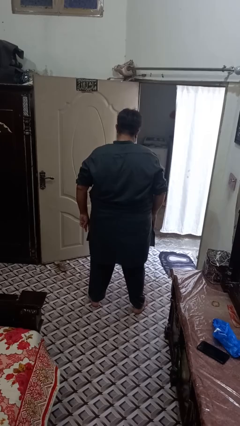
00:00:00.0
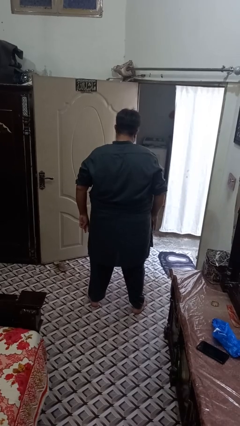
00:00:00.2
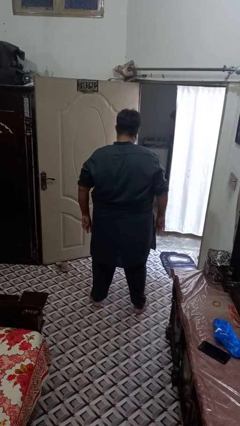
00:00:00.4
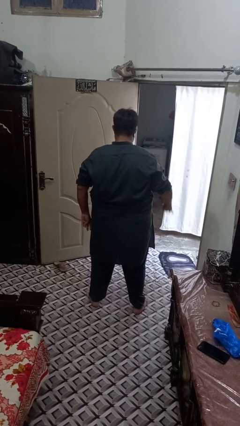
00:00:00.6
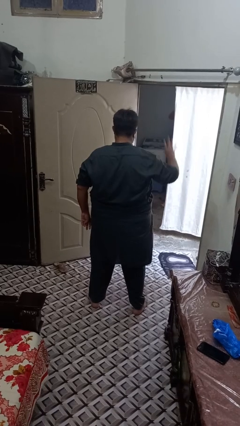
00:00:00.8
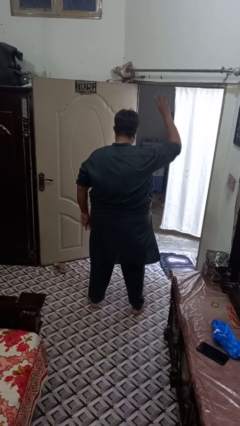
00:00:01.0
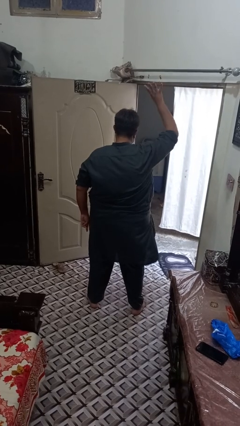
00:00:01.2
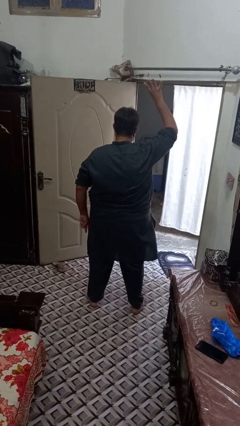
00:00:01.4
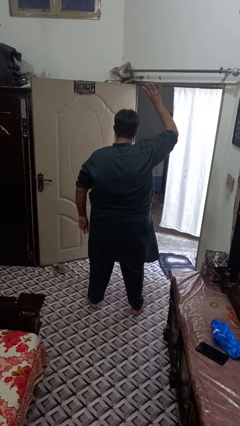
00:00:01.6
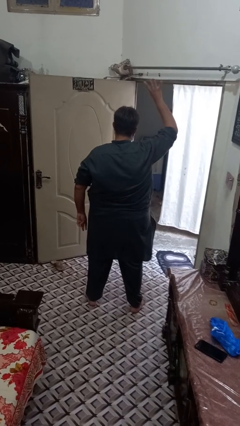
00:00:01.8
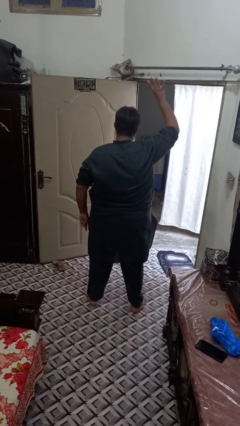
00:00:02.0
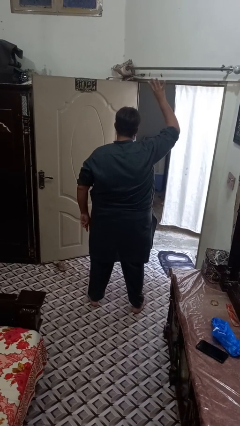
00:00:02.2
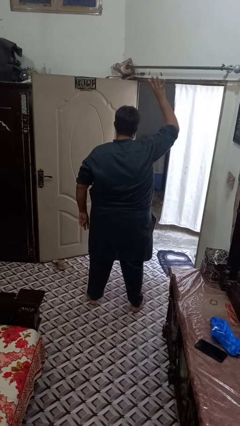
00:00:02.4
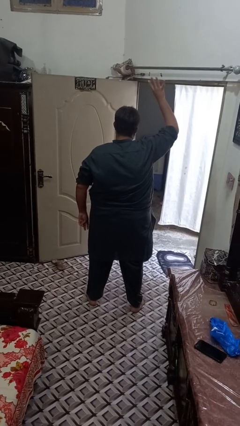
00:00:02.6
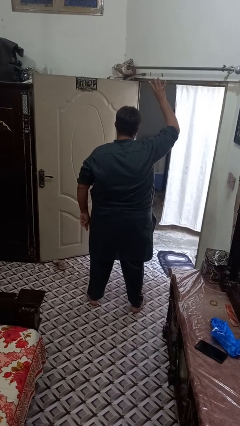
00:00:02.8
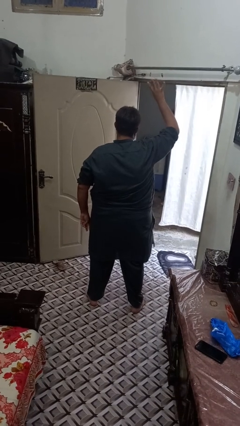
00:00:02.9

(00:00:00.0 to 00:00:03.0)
person gestures number four

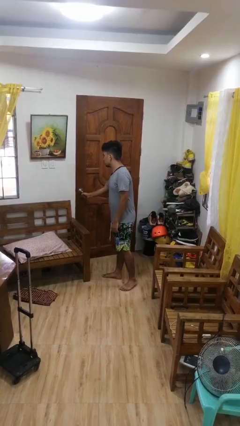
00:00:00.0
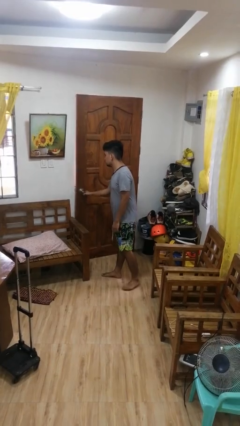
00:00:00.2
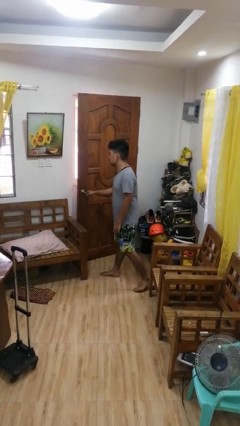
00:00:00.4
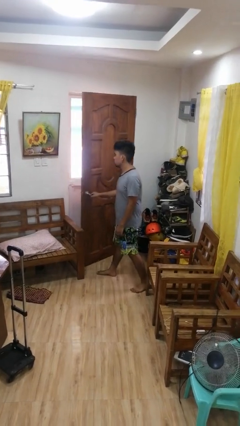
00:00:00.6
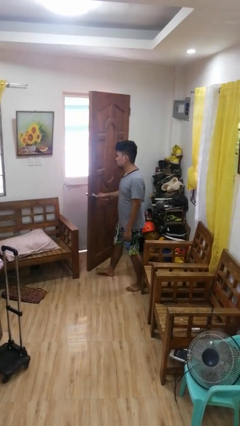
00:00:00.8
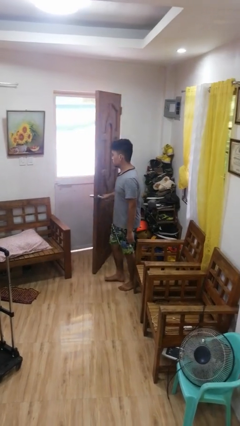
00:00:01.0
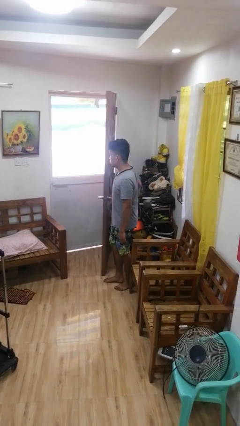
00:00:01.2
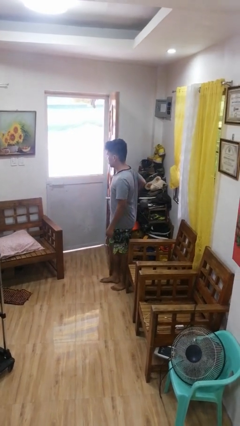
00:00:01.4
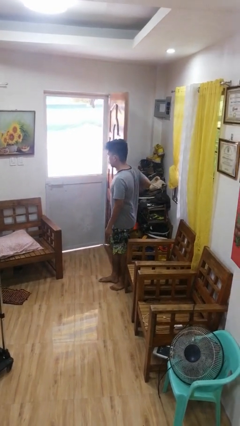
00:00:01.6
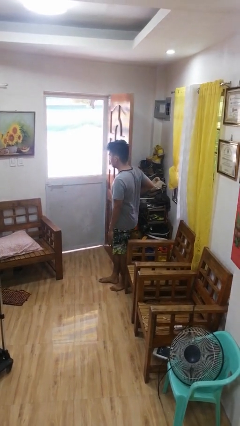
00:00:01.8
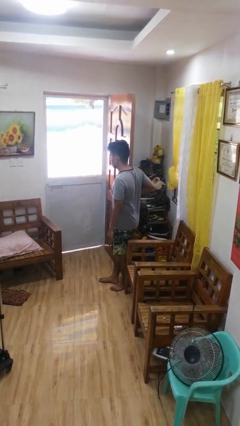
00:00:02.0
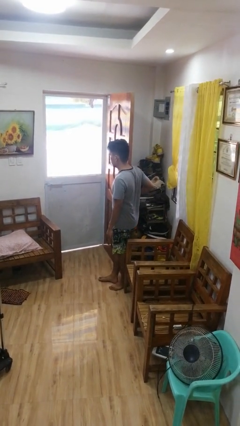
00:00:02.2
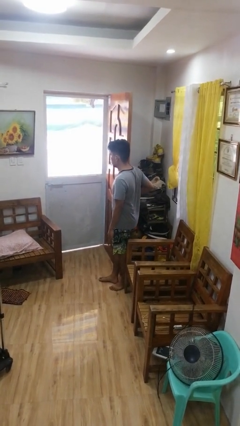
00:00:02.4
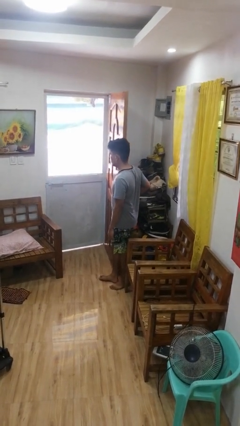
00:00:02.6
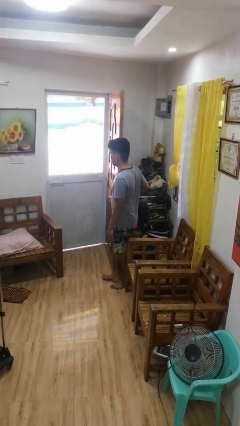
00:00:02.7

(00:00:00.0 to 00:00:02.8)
person opens facility door

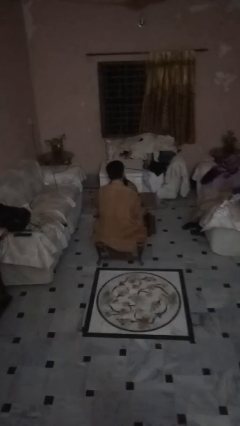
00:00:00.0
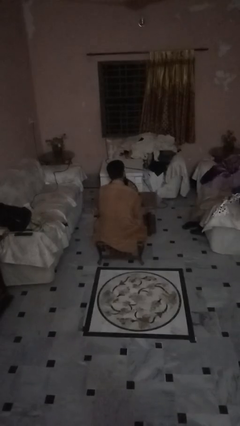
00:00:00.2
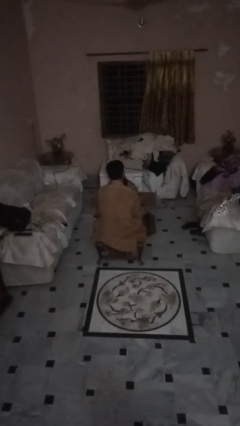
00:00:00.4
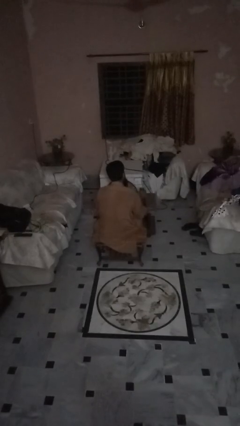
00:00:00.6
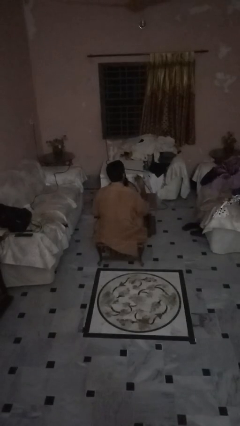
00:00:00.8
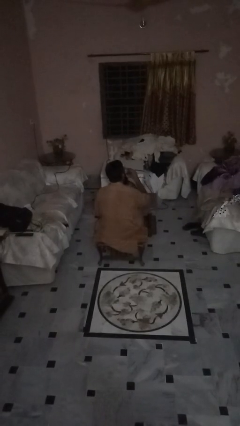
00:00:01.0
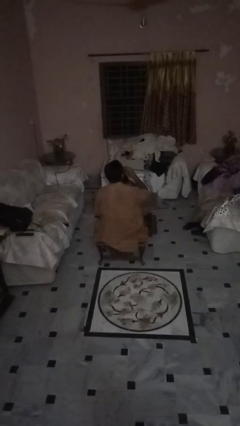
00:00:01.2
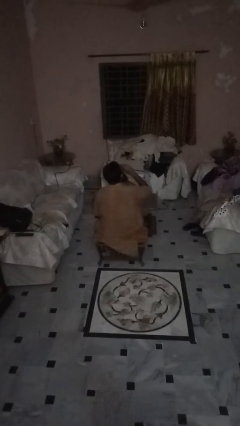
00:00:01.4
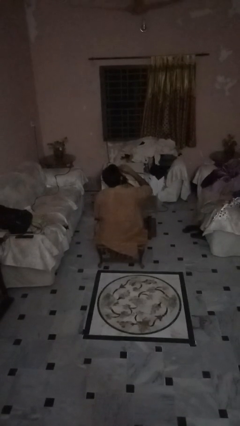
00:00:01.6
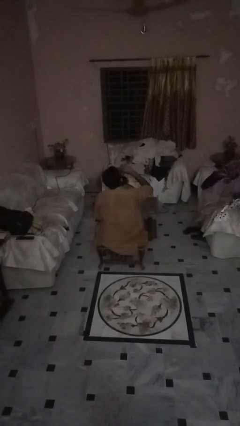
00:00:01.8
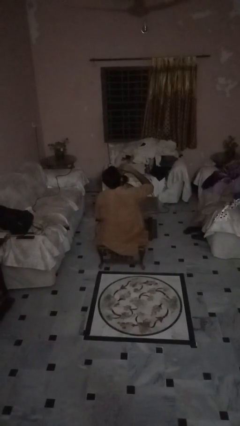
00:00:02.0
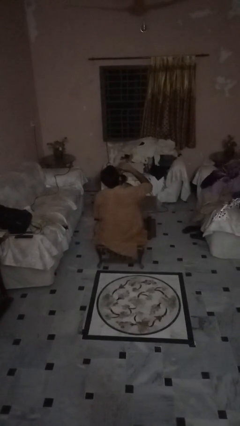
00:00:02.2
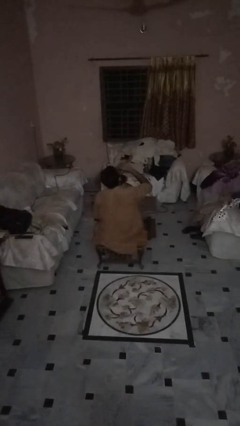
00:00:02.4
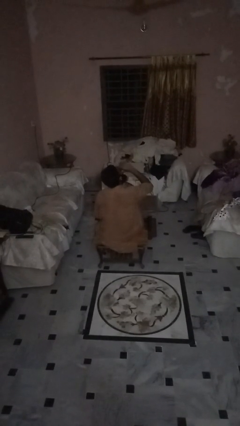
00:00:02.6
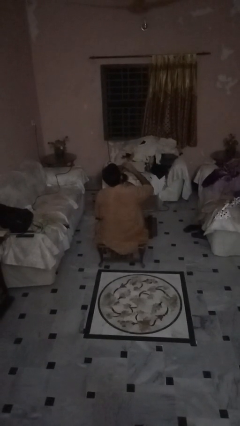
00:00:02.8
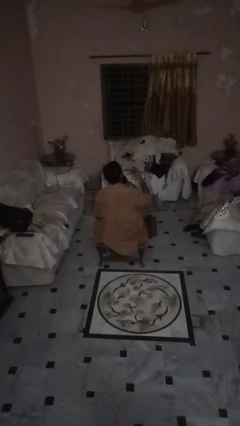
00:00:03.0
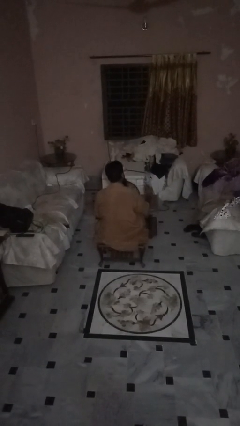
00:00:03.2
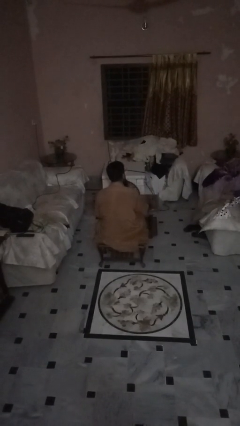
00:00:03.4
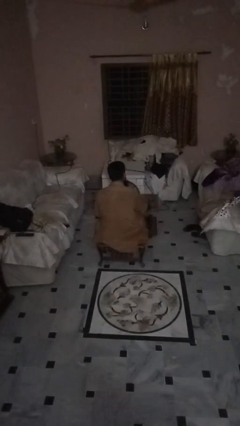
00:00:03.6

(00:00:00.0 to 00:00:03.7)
person drinks from beverage can

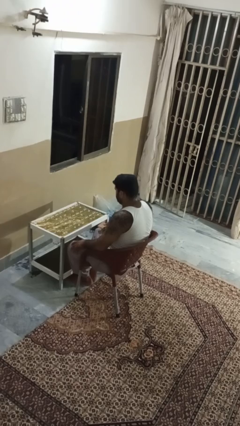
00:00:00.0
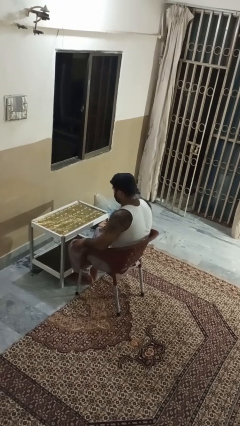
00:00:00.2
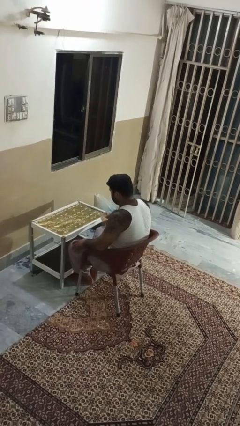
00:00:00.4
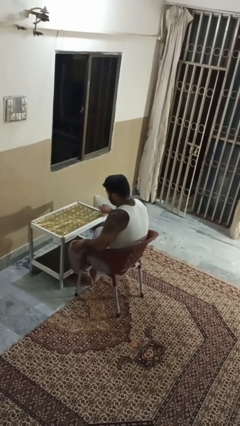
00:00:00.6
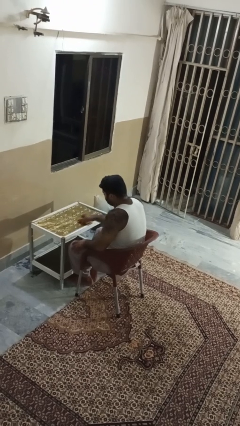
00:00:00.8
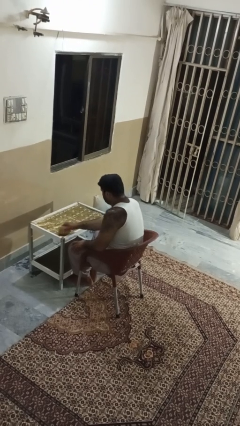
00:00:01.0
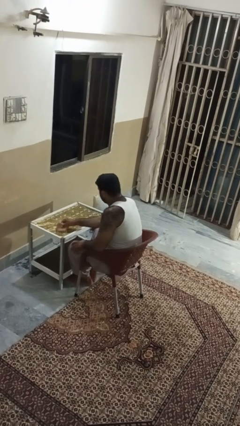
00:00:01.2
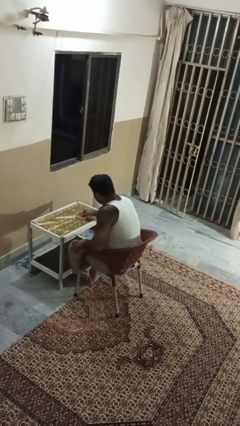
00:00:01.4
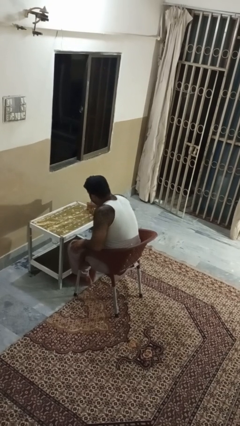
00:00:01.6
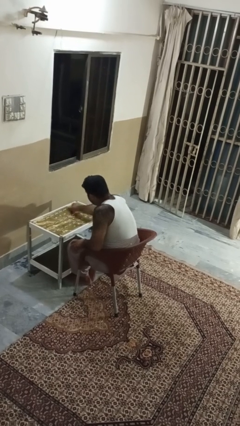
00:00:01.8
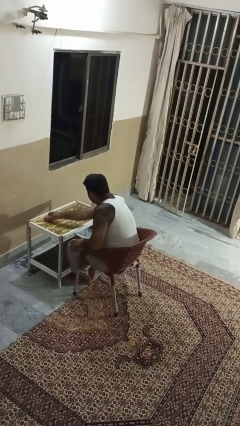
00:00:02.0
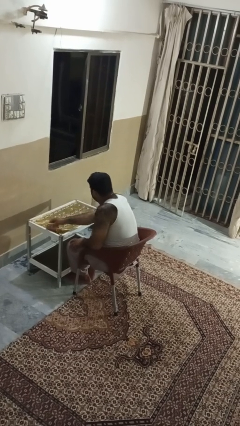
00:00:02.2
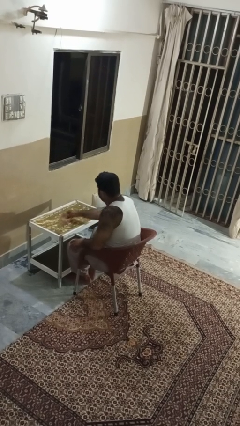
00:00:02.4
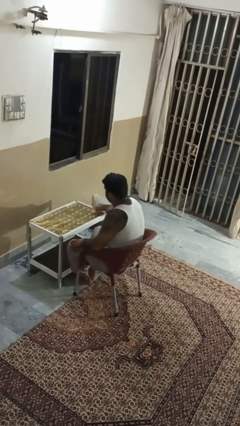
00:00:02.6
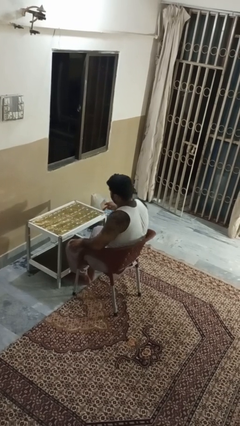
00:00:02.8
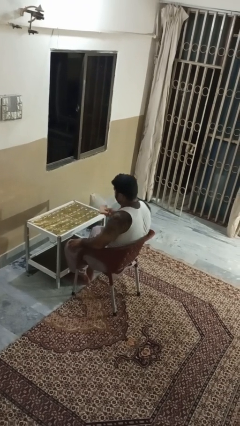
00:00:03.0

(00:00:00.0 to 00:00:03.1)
person cleans table with rag

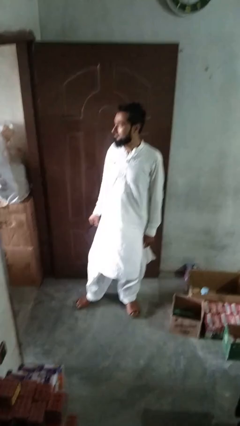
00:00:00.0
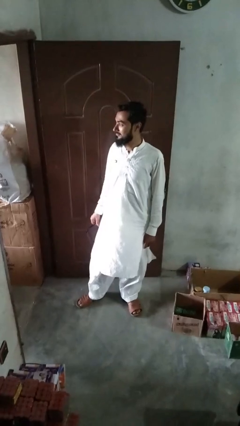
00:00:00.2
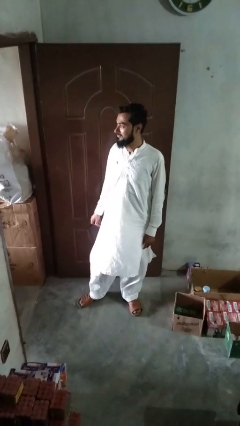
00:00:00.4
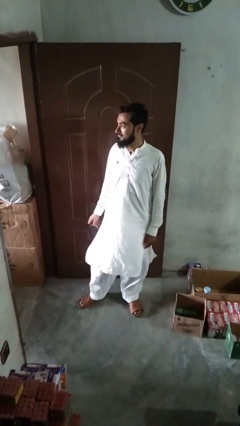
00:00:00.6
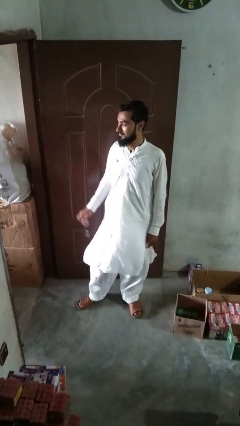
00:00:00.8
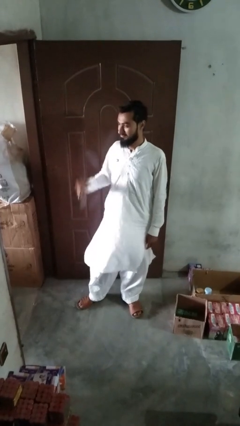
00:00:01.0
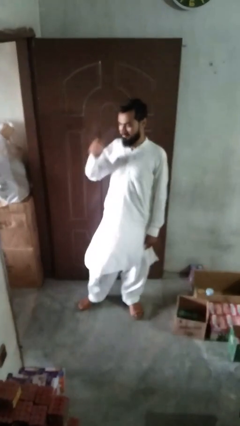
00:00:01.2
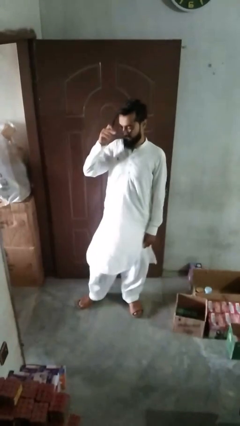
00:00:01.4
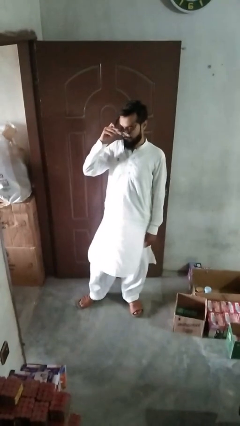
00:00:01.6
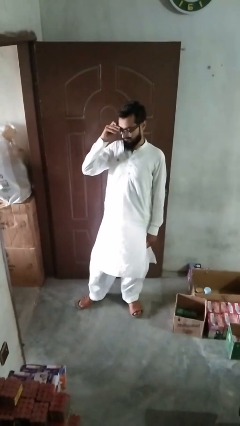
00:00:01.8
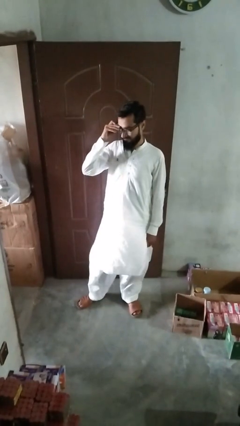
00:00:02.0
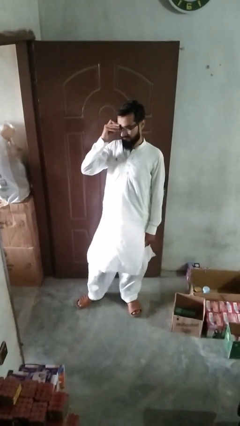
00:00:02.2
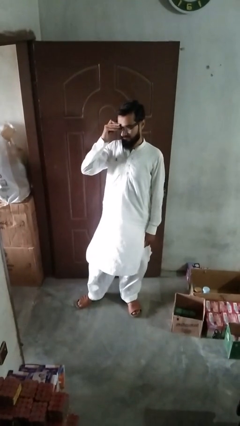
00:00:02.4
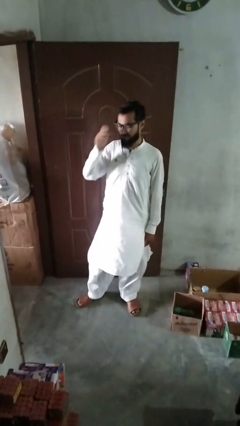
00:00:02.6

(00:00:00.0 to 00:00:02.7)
person puts on glasses

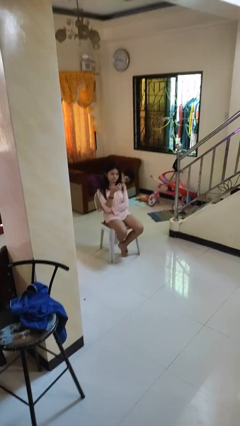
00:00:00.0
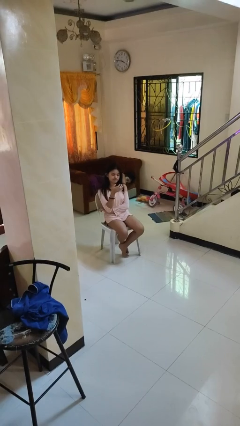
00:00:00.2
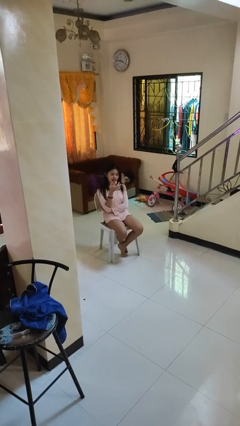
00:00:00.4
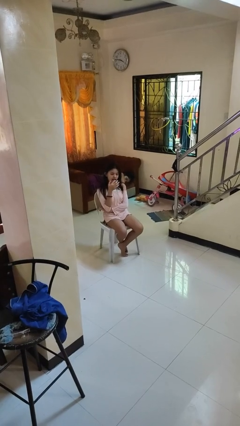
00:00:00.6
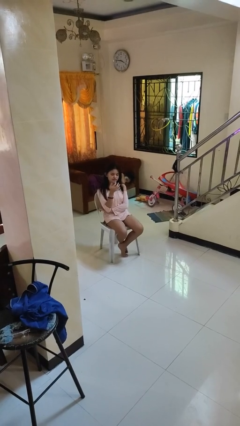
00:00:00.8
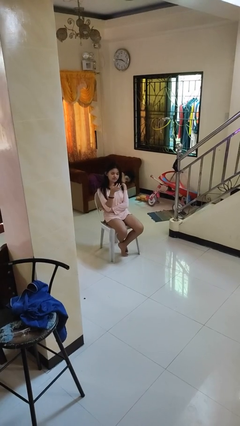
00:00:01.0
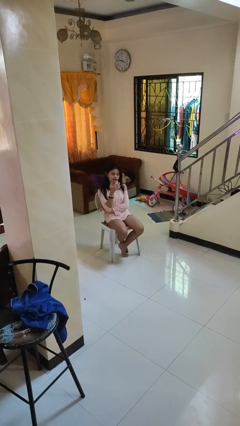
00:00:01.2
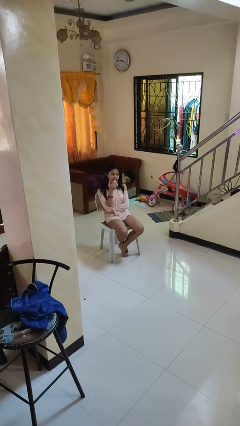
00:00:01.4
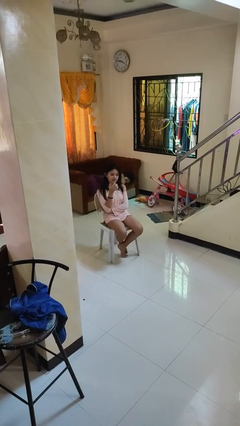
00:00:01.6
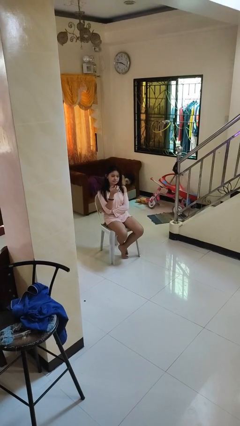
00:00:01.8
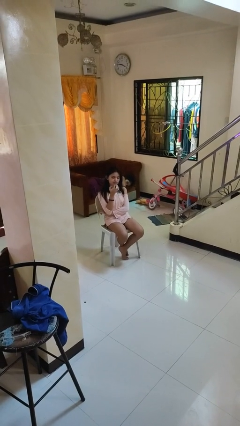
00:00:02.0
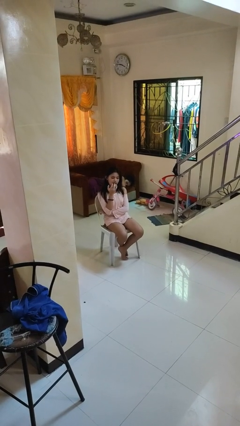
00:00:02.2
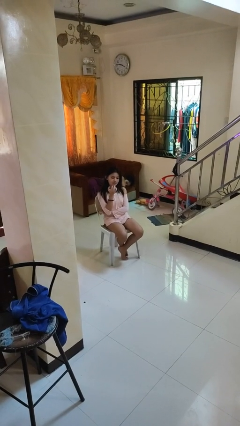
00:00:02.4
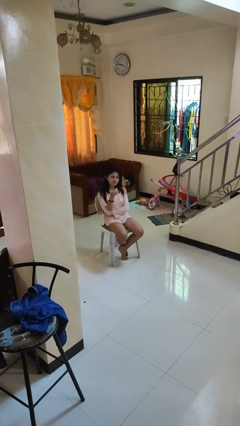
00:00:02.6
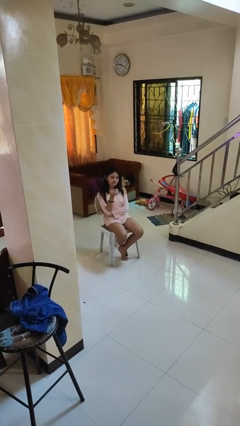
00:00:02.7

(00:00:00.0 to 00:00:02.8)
person licks fingers
